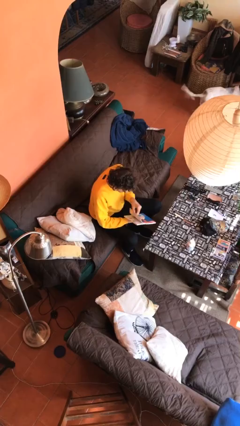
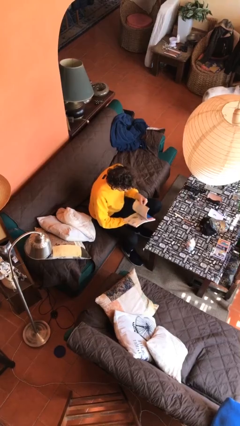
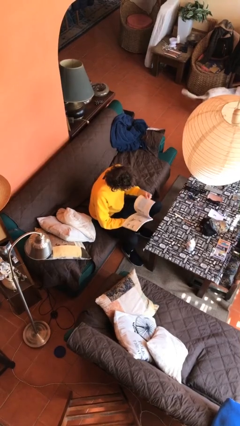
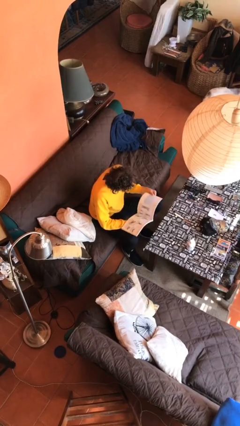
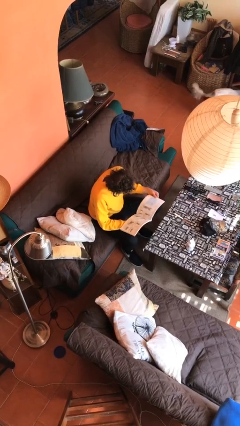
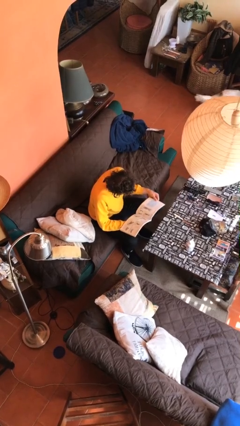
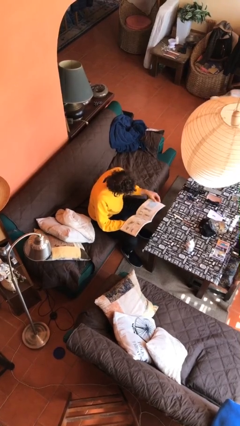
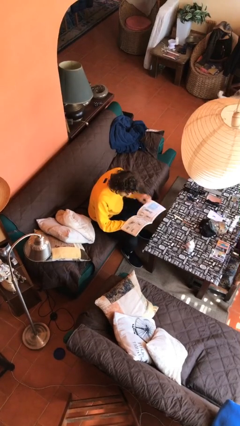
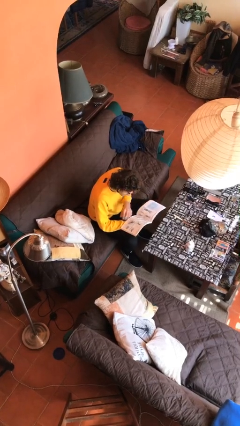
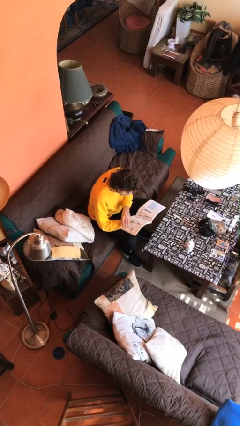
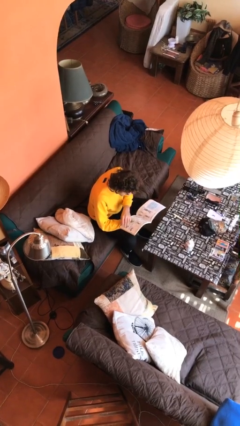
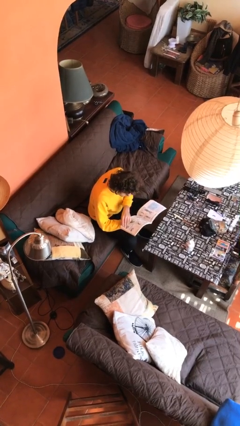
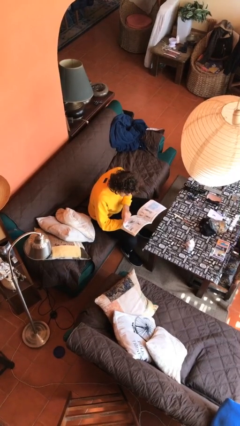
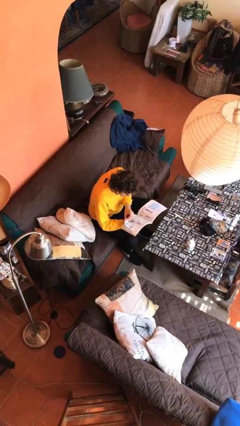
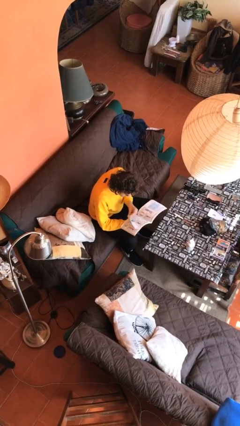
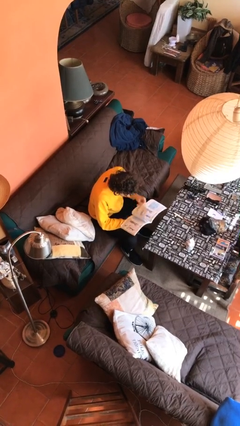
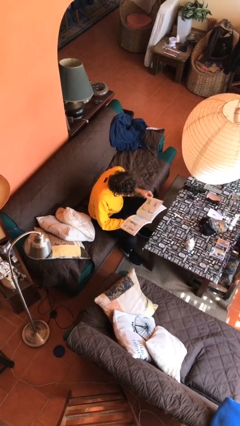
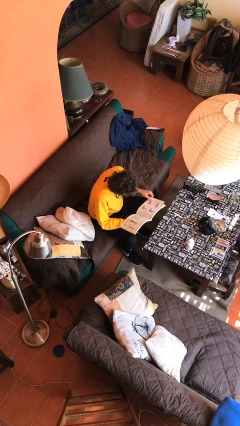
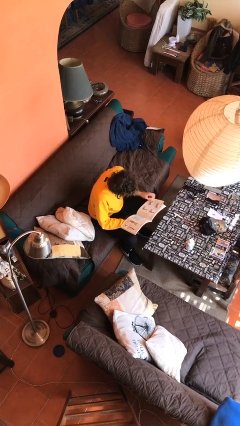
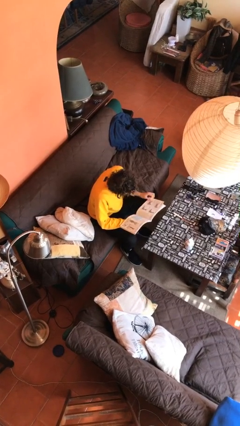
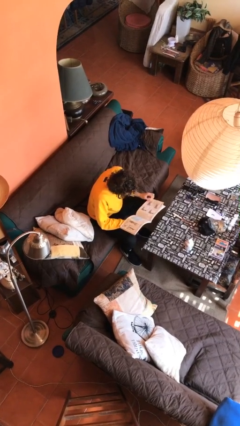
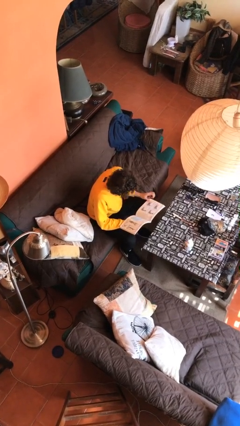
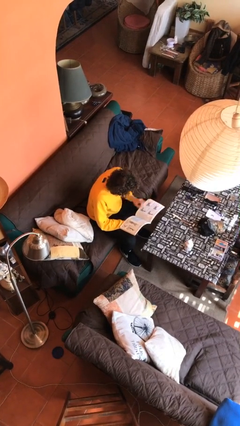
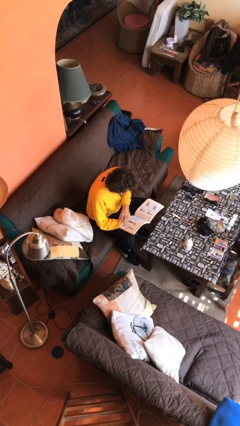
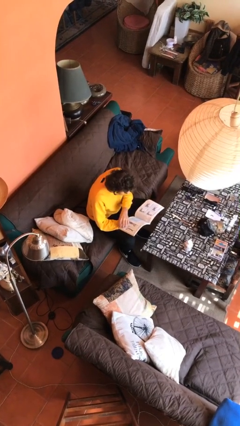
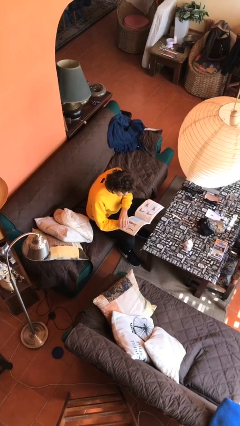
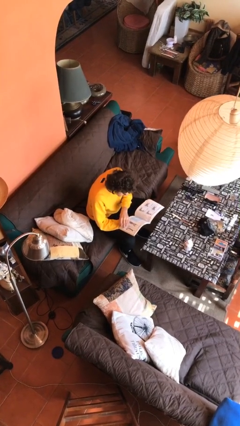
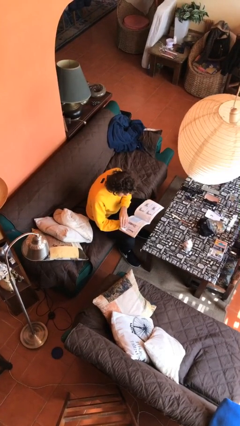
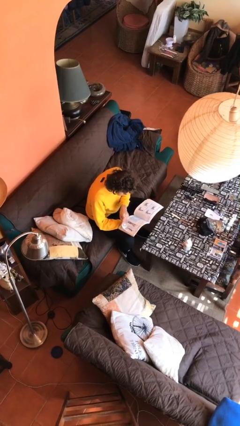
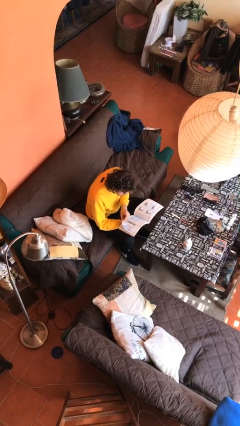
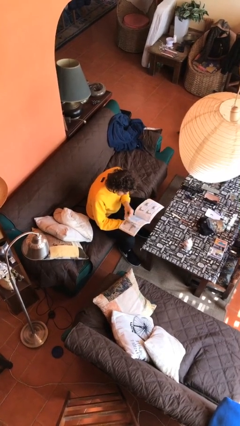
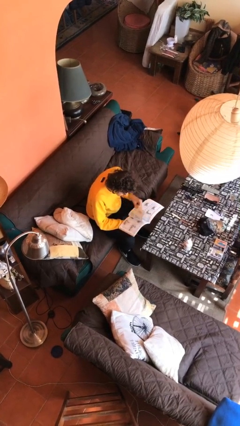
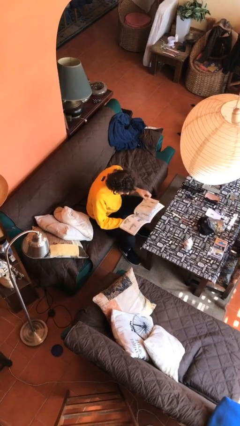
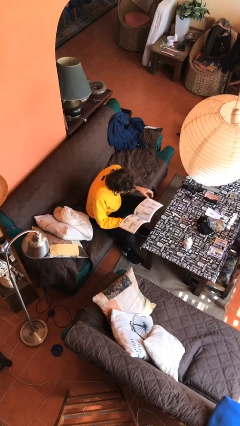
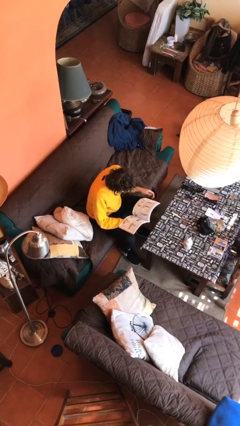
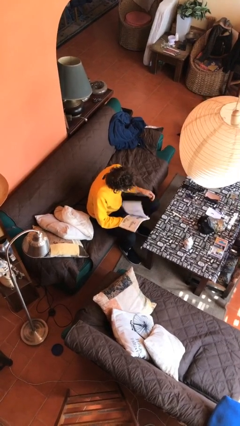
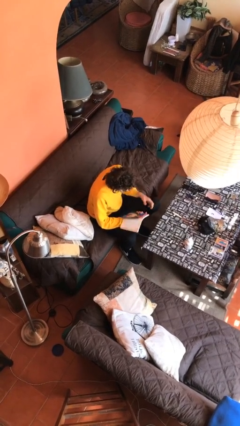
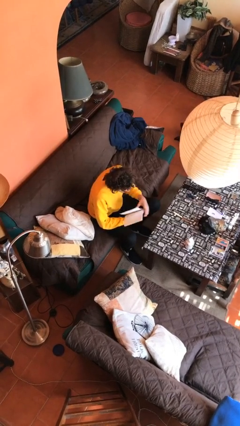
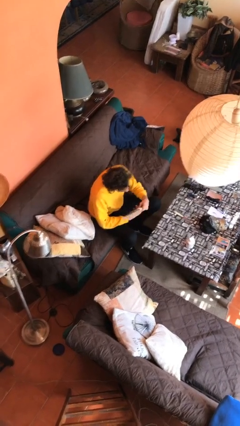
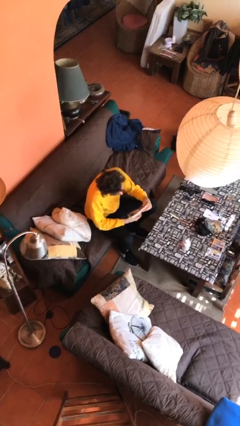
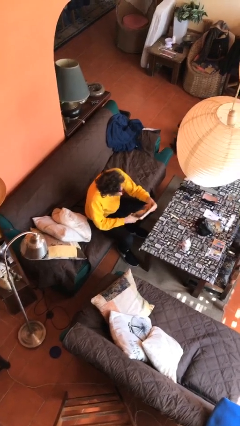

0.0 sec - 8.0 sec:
person reads document

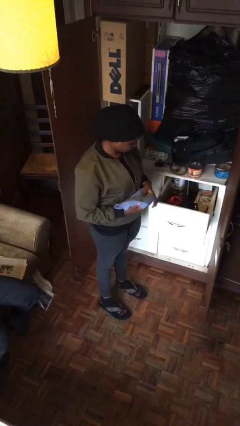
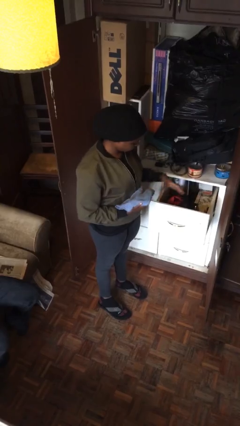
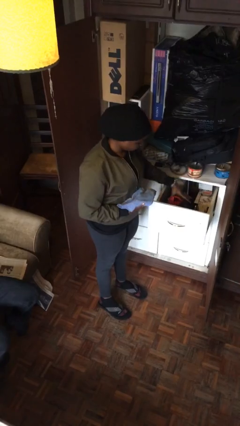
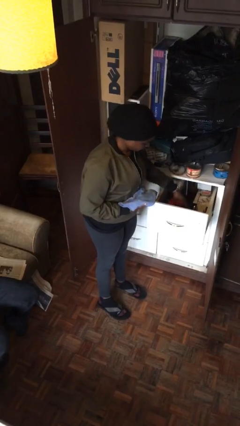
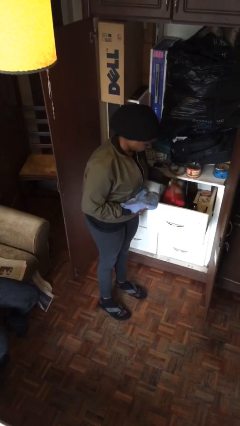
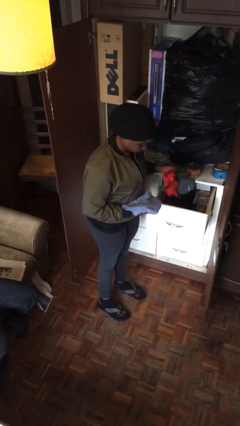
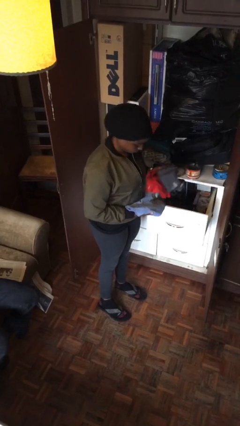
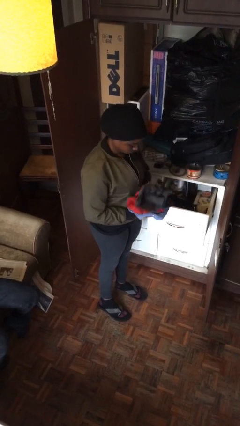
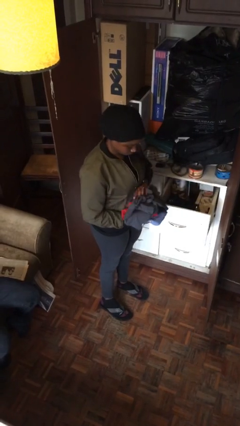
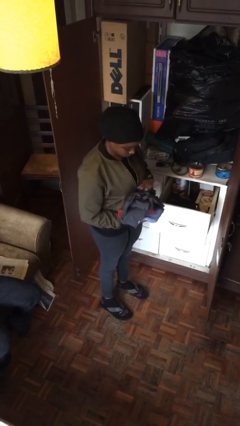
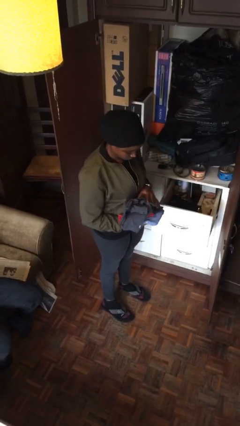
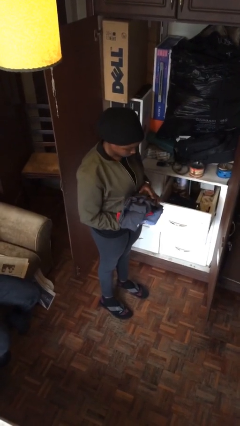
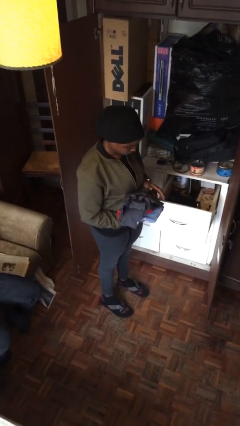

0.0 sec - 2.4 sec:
person takes clothes from dresser

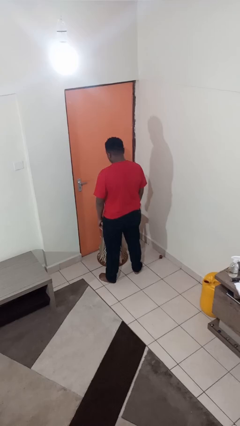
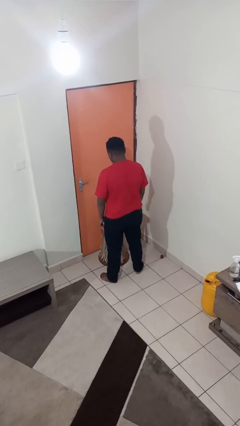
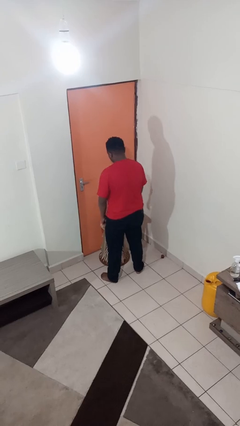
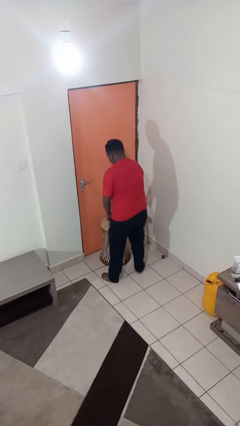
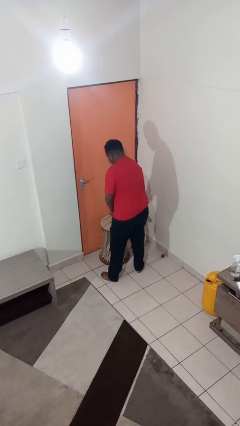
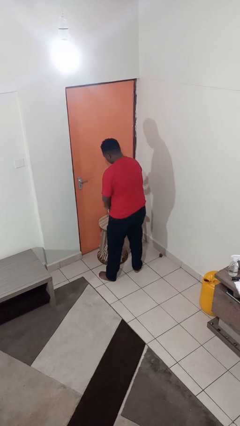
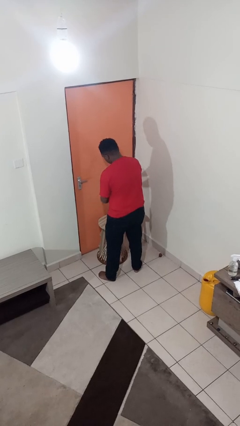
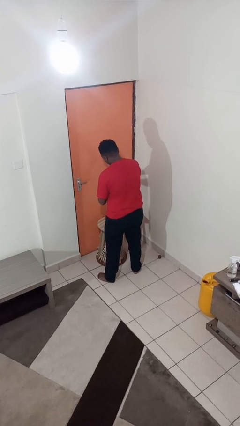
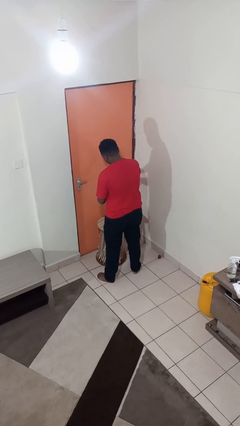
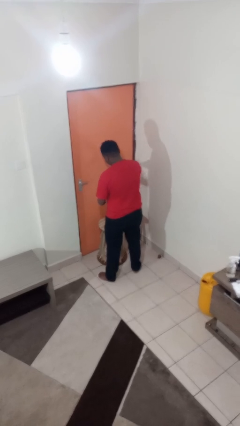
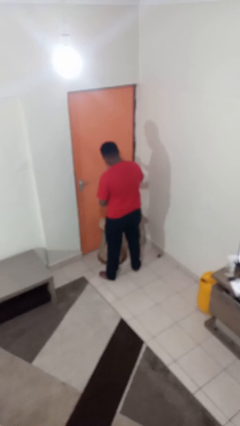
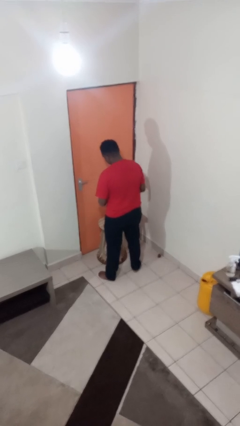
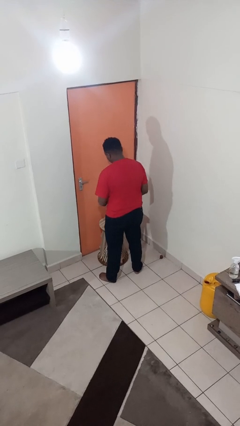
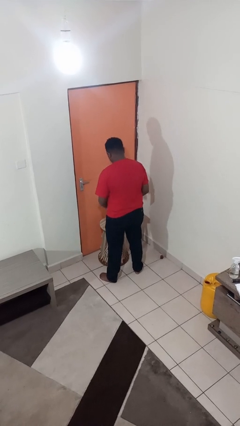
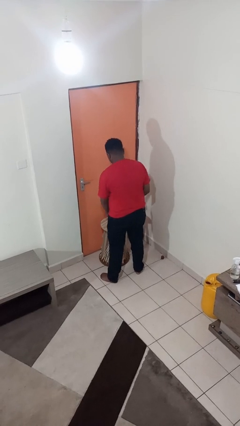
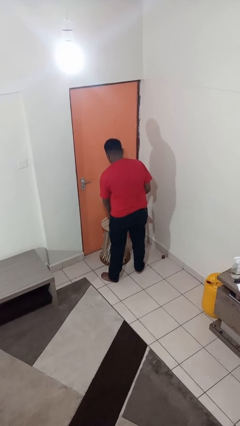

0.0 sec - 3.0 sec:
person opens jar

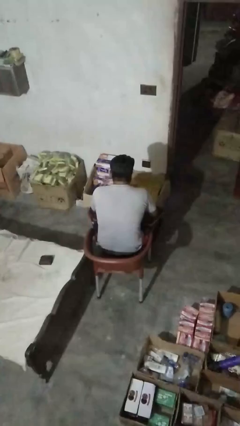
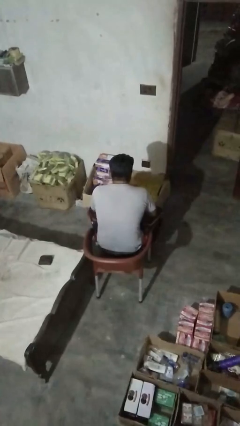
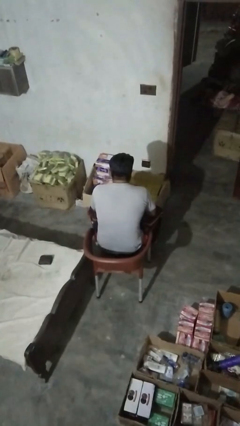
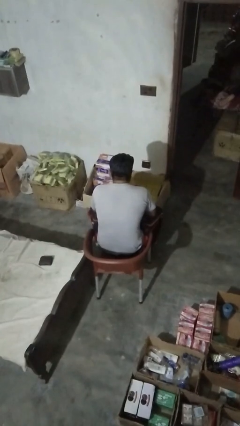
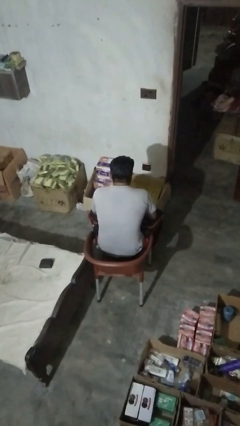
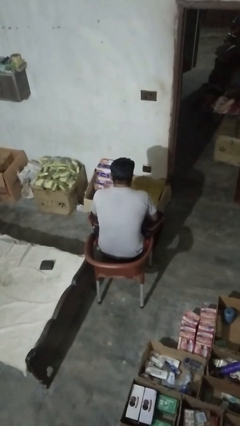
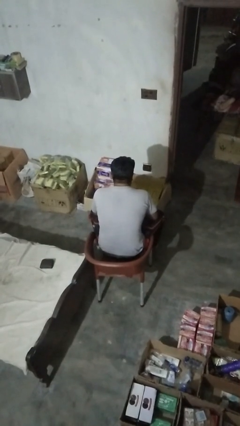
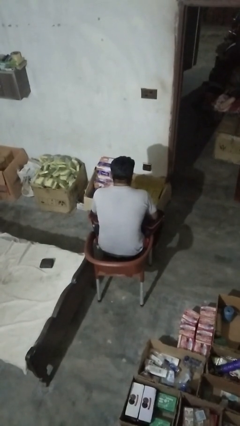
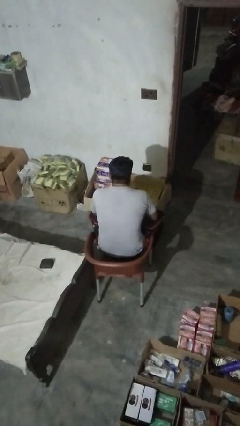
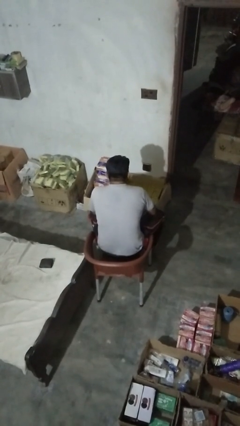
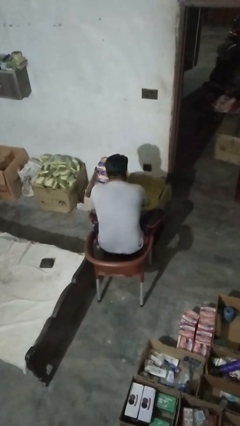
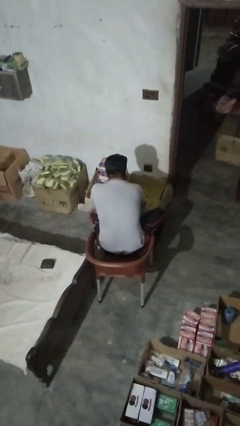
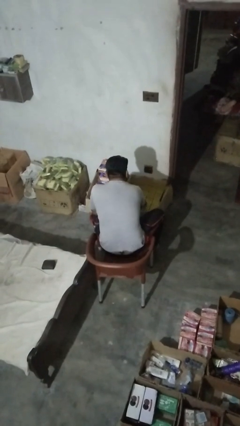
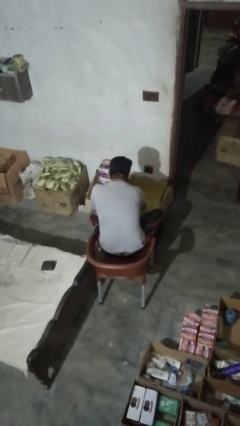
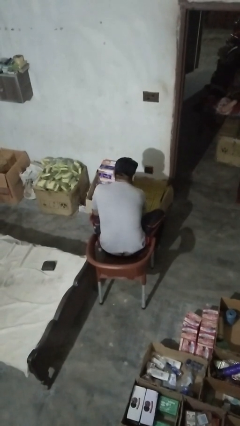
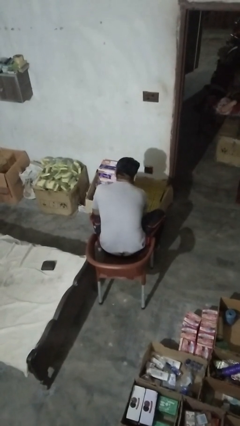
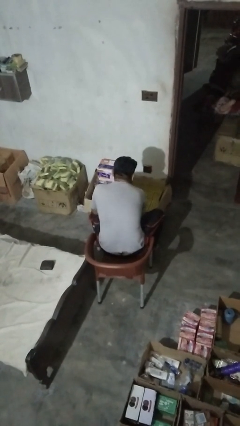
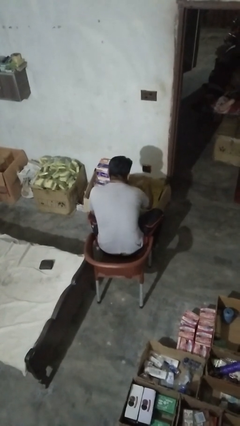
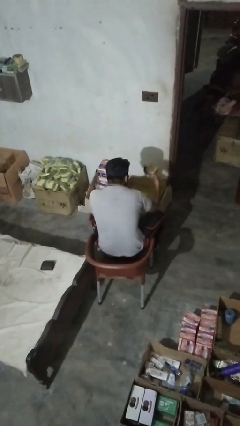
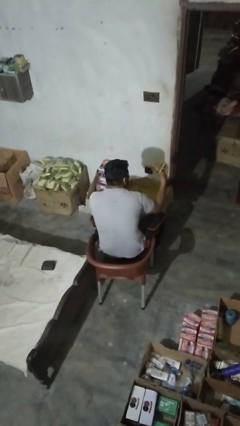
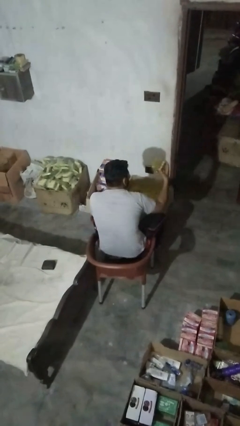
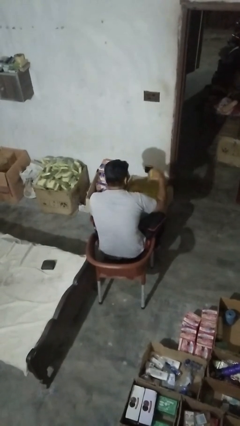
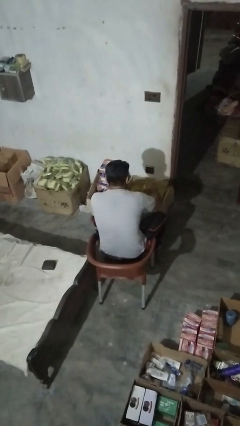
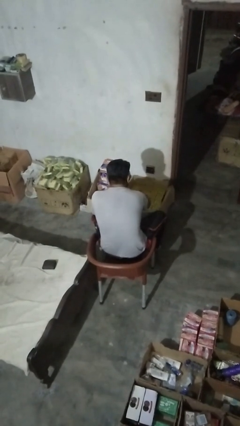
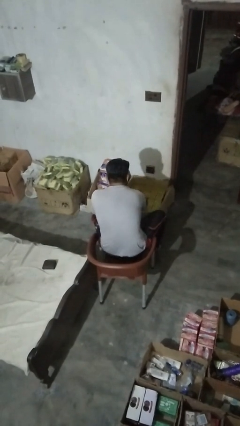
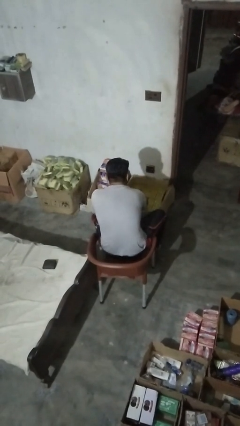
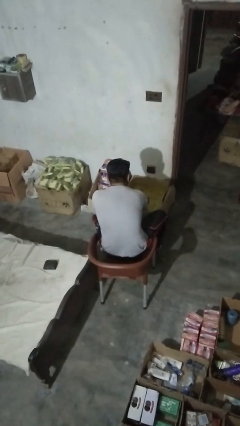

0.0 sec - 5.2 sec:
person searches in box
